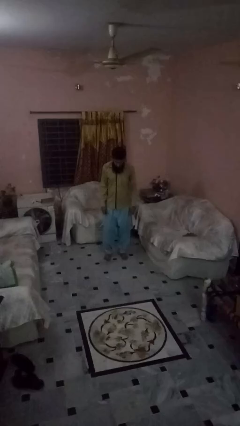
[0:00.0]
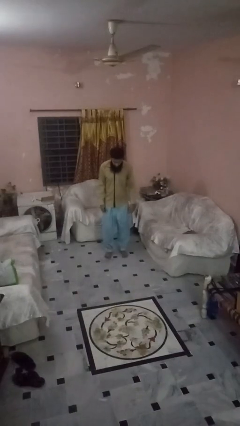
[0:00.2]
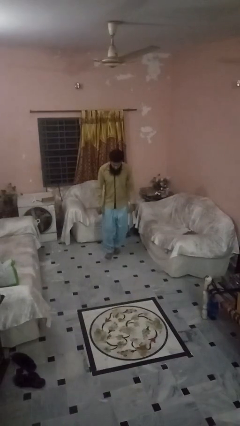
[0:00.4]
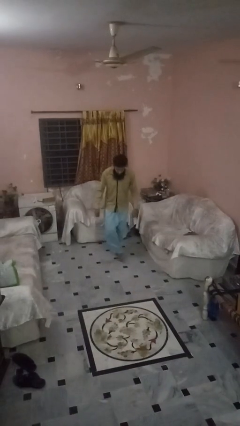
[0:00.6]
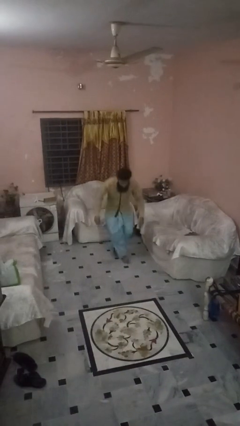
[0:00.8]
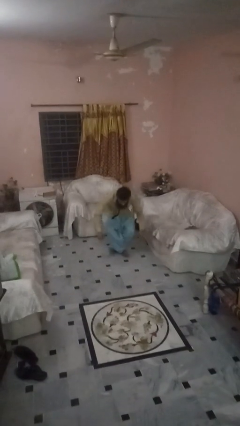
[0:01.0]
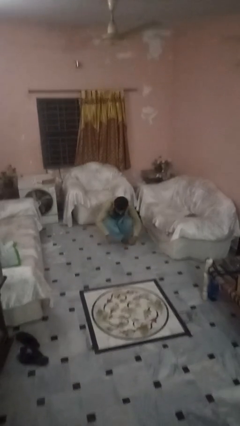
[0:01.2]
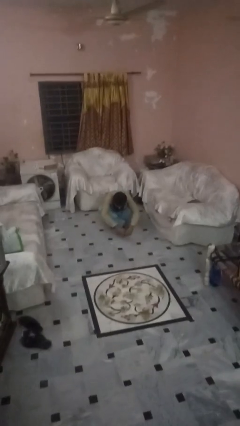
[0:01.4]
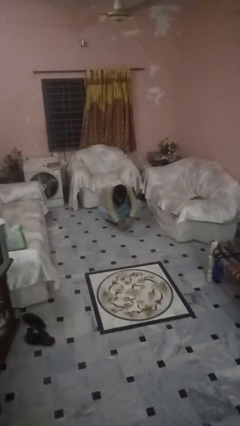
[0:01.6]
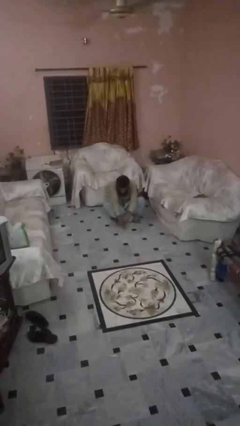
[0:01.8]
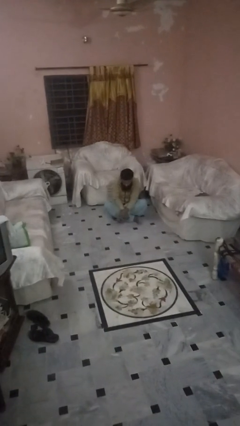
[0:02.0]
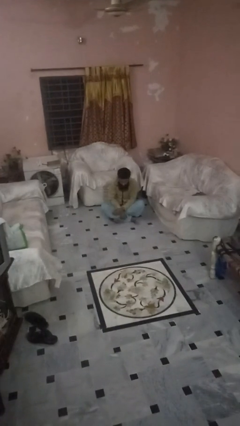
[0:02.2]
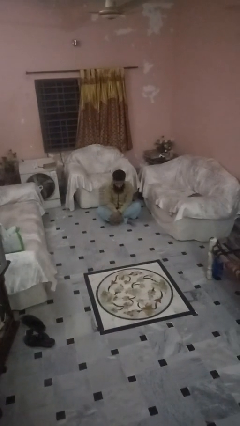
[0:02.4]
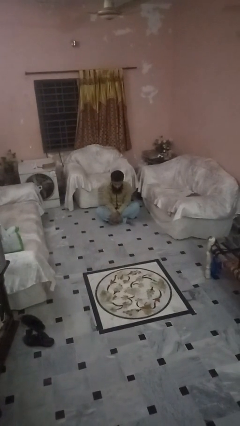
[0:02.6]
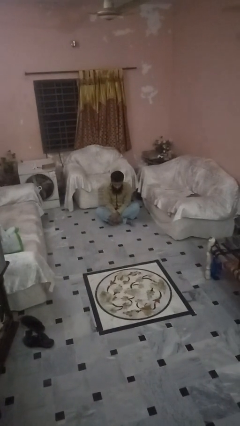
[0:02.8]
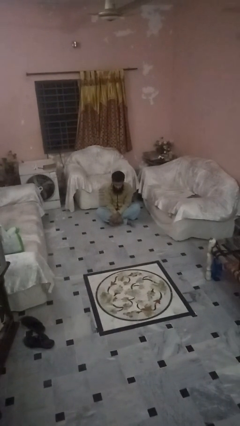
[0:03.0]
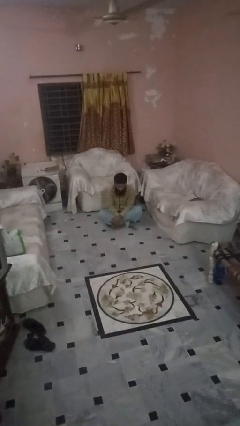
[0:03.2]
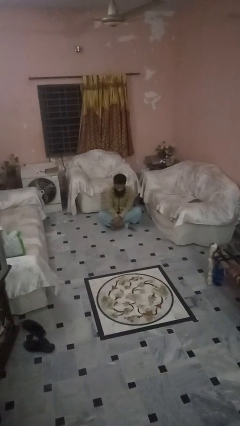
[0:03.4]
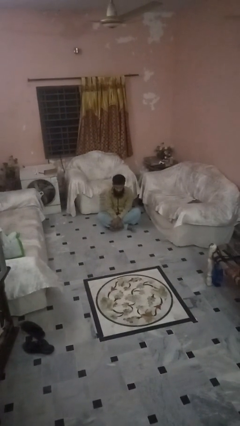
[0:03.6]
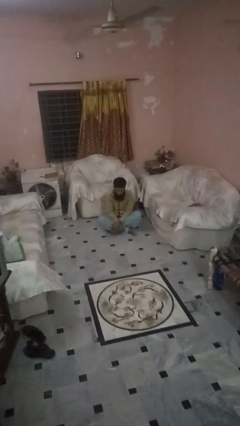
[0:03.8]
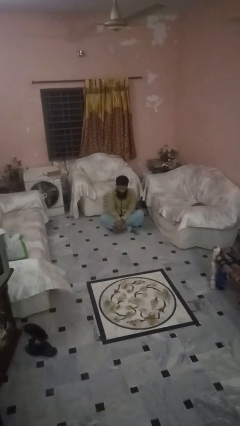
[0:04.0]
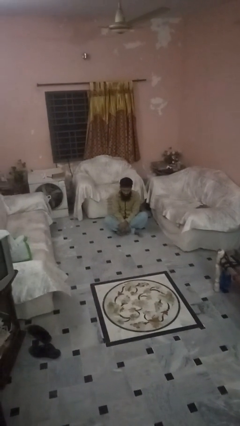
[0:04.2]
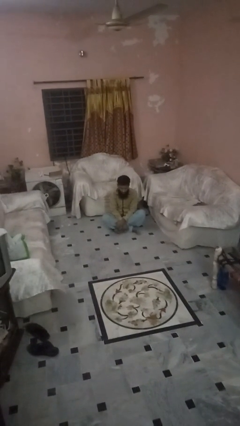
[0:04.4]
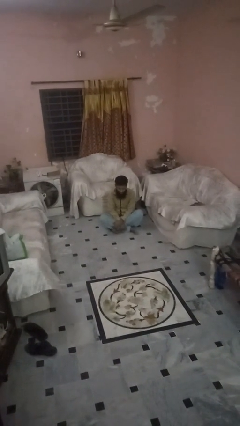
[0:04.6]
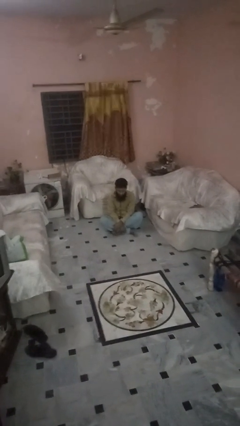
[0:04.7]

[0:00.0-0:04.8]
person sits crisscross

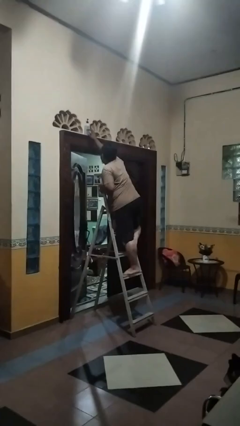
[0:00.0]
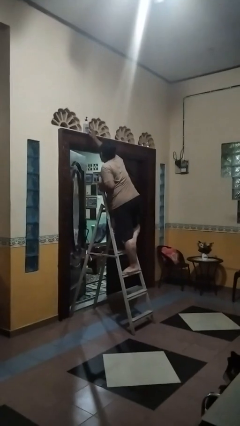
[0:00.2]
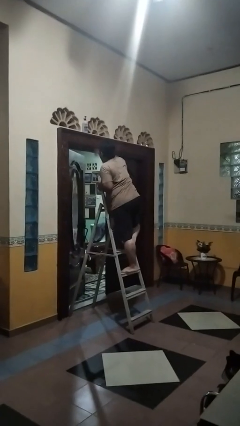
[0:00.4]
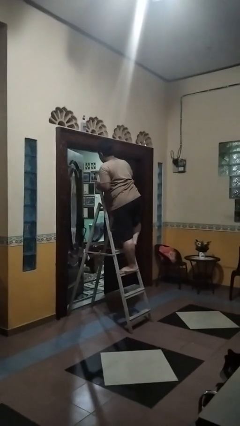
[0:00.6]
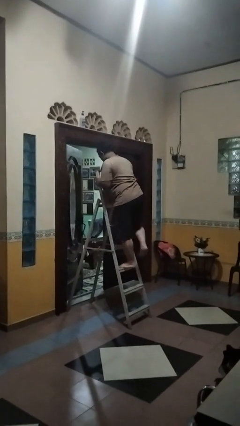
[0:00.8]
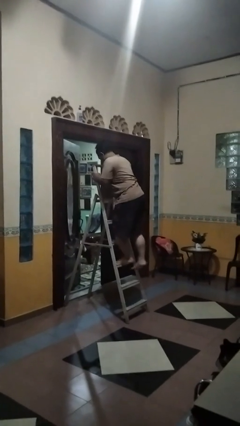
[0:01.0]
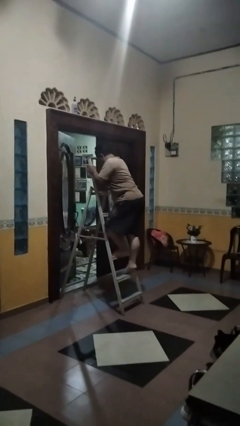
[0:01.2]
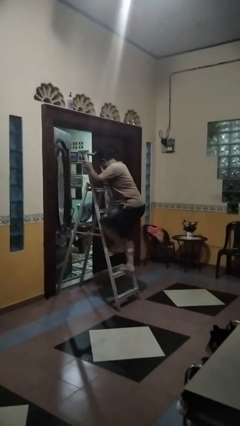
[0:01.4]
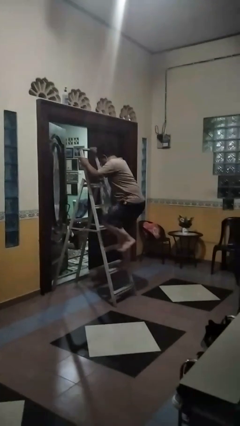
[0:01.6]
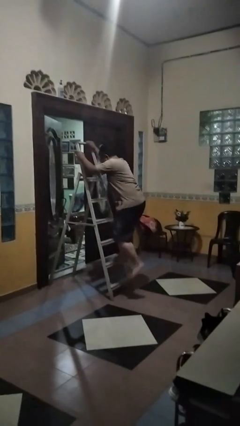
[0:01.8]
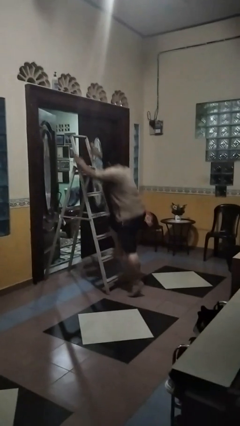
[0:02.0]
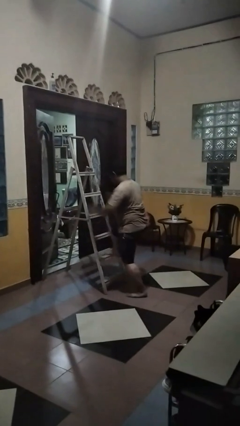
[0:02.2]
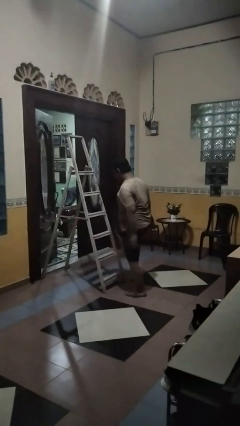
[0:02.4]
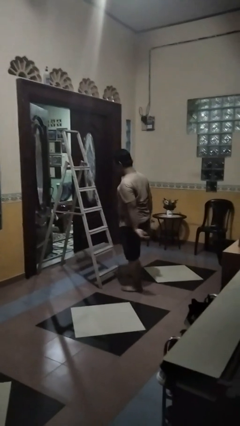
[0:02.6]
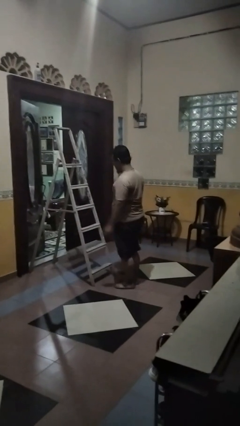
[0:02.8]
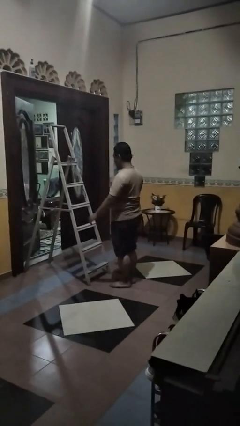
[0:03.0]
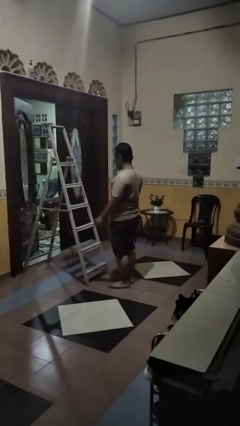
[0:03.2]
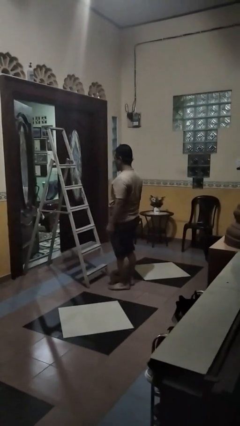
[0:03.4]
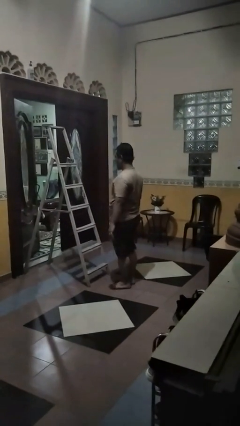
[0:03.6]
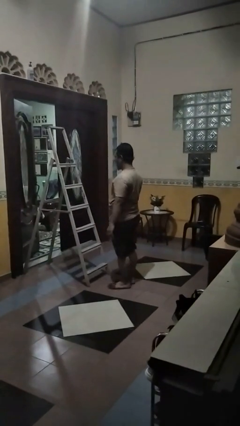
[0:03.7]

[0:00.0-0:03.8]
person climbs down ladder

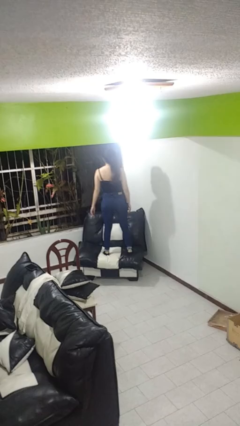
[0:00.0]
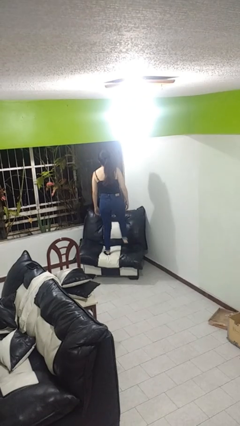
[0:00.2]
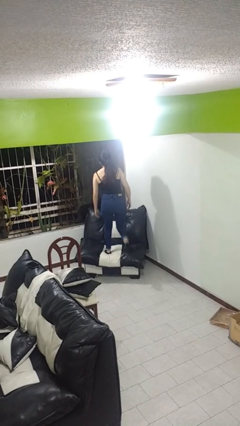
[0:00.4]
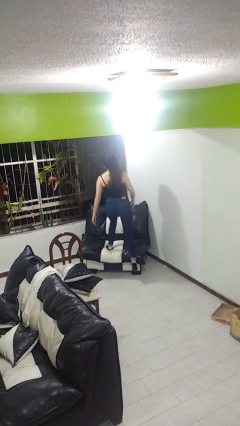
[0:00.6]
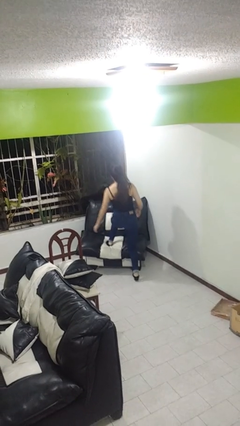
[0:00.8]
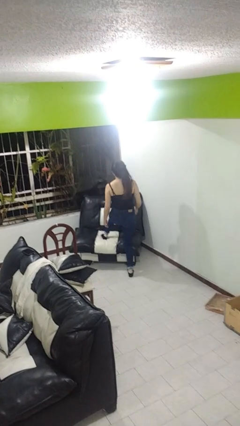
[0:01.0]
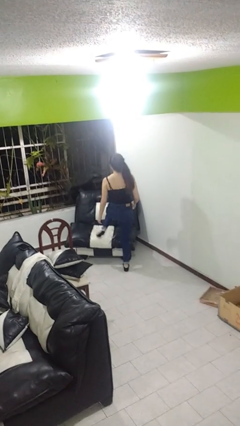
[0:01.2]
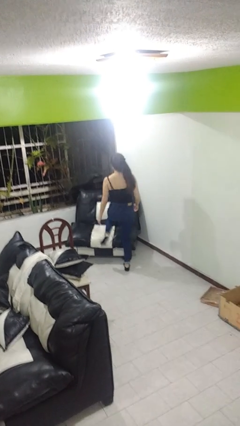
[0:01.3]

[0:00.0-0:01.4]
person climbs off couch

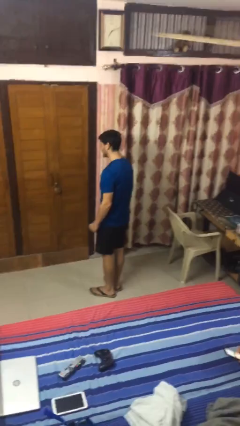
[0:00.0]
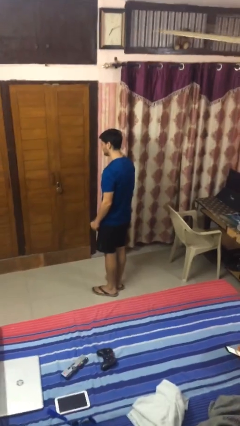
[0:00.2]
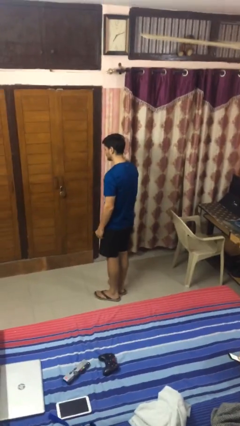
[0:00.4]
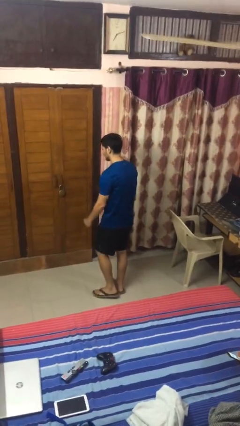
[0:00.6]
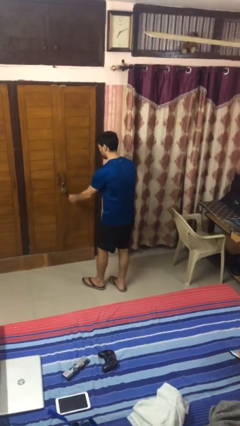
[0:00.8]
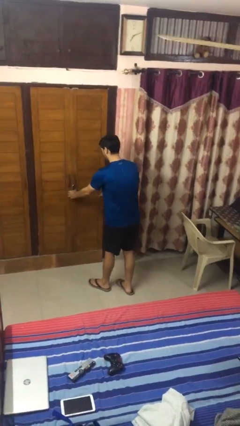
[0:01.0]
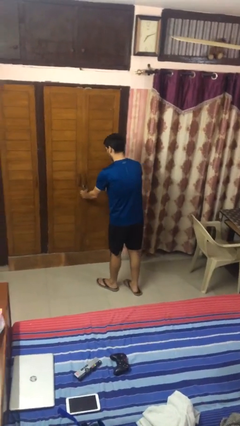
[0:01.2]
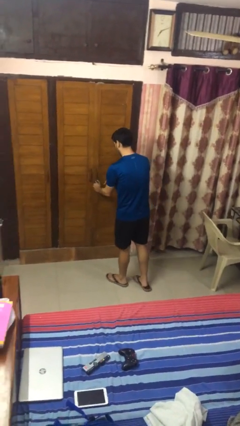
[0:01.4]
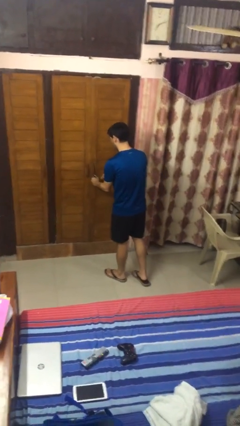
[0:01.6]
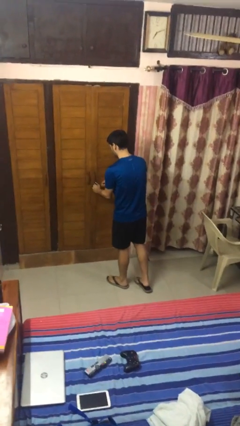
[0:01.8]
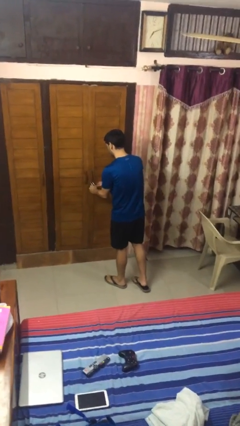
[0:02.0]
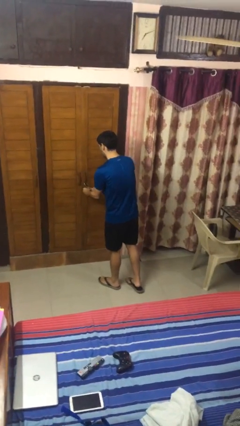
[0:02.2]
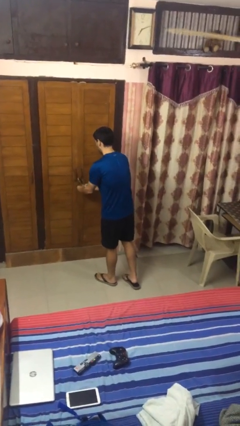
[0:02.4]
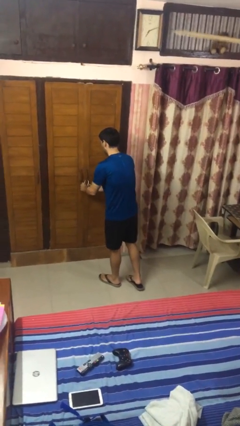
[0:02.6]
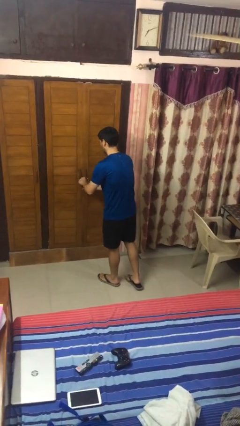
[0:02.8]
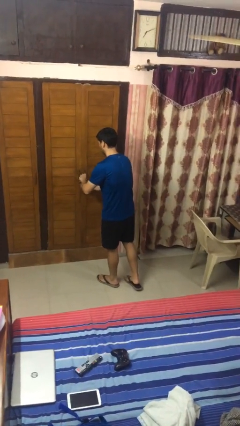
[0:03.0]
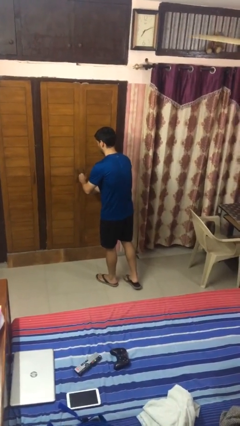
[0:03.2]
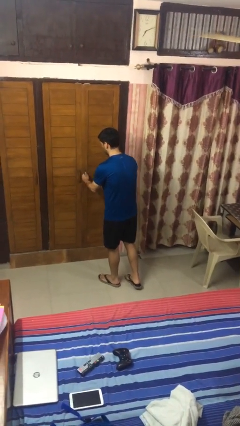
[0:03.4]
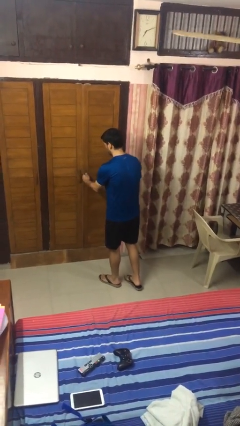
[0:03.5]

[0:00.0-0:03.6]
person unlocks door with keys

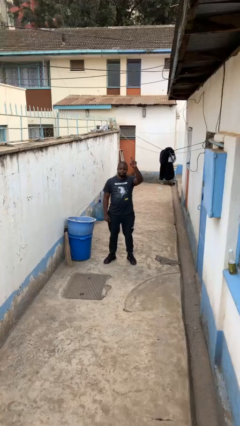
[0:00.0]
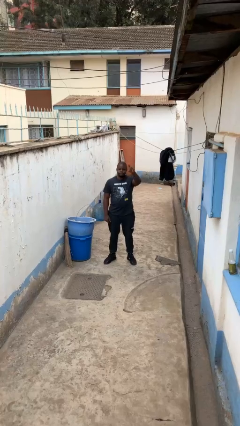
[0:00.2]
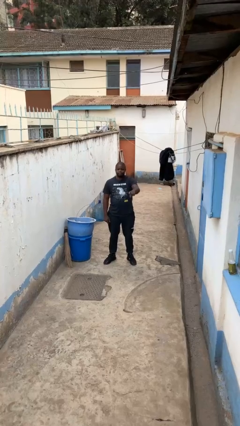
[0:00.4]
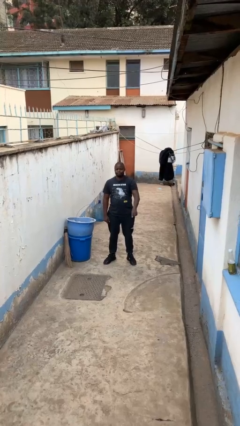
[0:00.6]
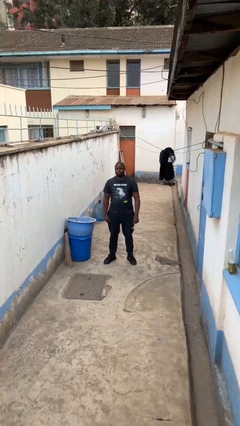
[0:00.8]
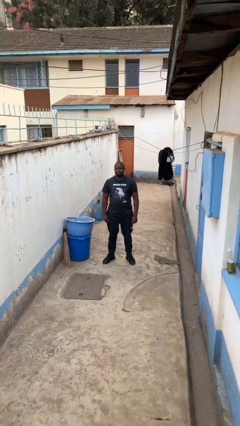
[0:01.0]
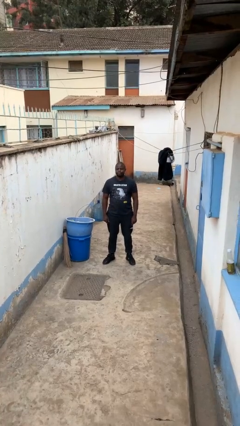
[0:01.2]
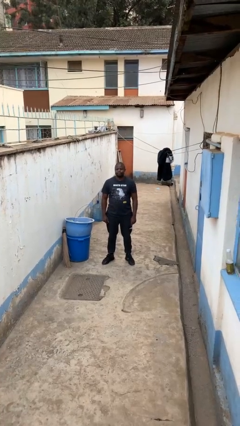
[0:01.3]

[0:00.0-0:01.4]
person gestures swipe down

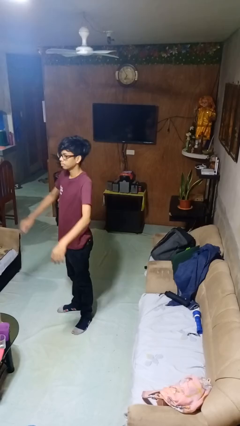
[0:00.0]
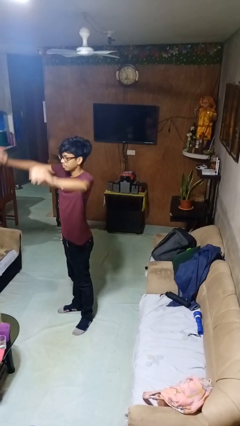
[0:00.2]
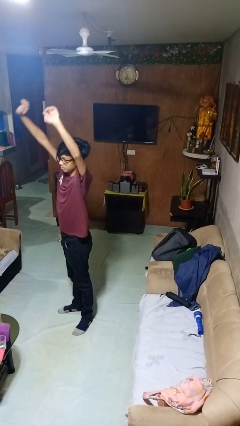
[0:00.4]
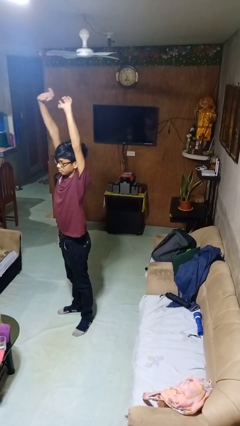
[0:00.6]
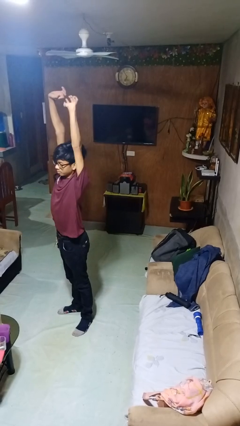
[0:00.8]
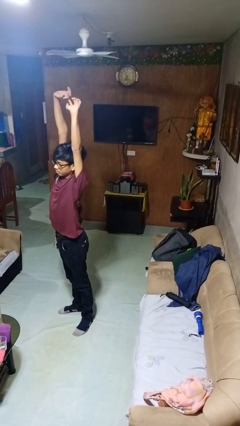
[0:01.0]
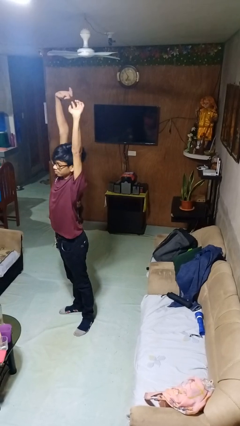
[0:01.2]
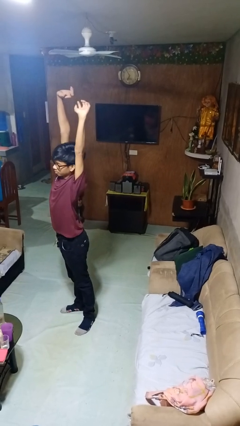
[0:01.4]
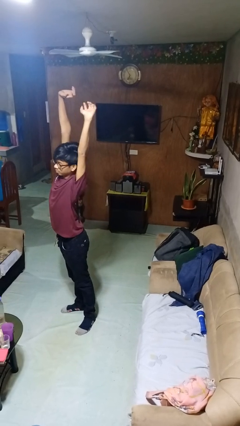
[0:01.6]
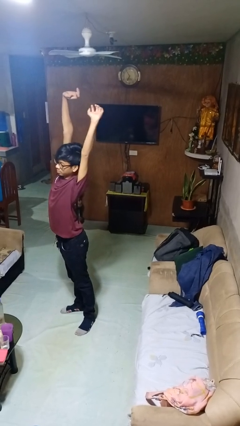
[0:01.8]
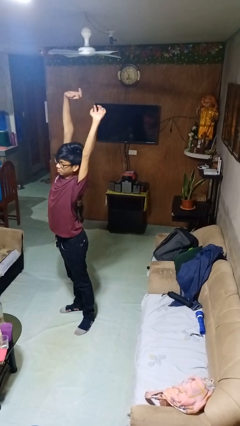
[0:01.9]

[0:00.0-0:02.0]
person stretches arms over head

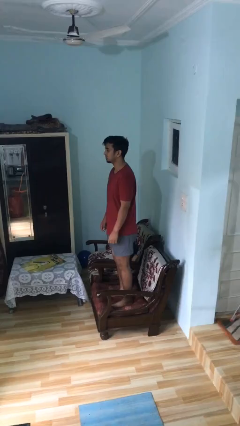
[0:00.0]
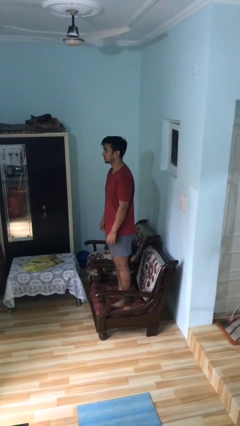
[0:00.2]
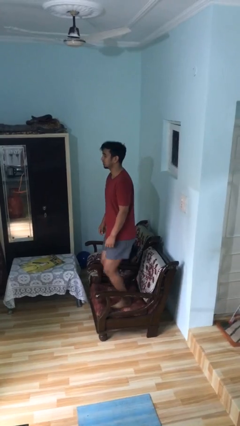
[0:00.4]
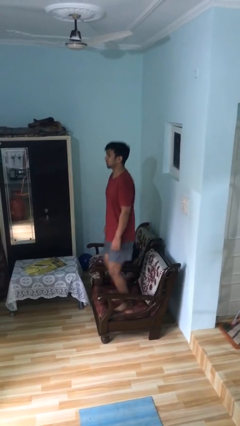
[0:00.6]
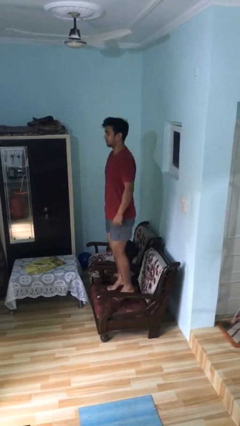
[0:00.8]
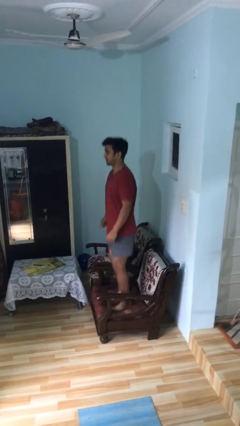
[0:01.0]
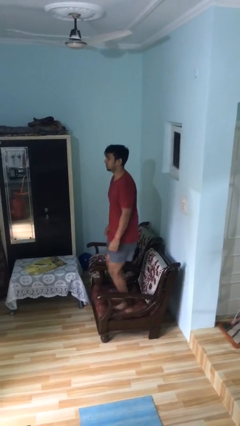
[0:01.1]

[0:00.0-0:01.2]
person jumps on couch
